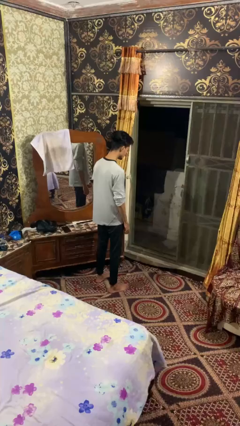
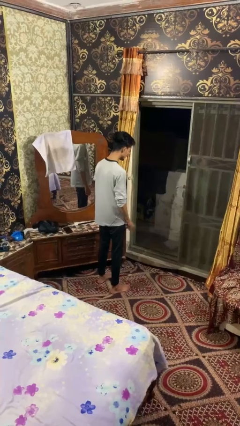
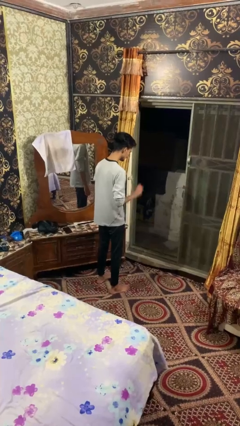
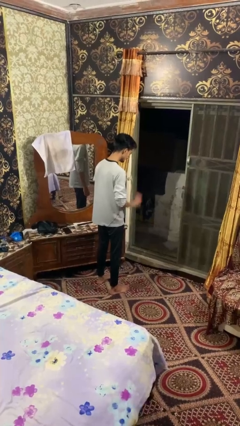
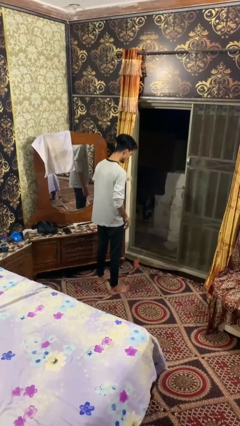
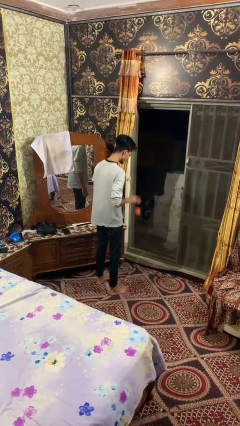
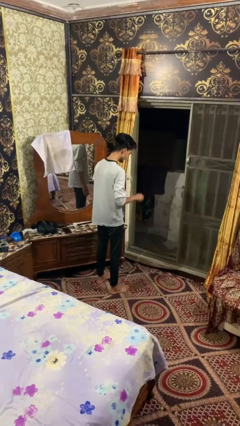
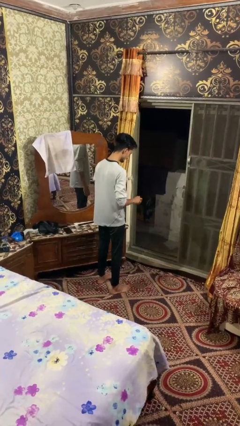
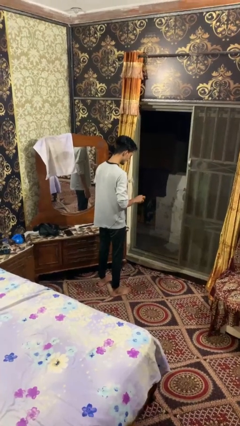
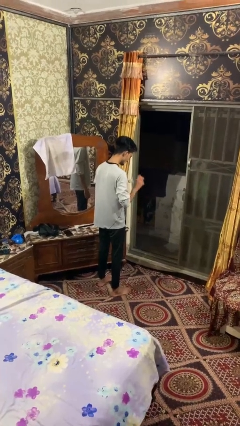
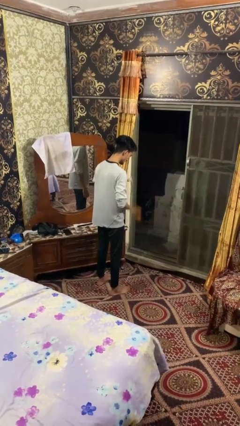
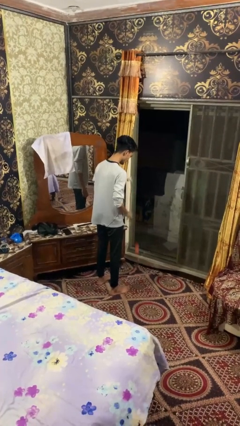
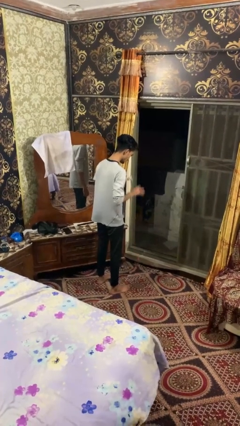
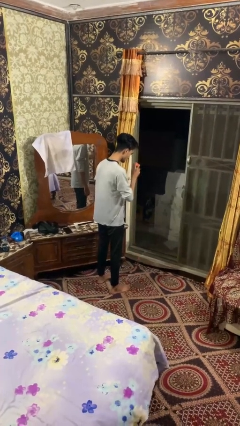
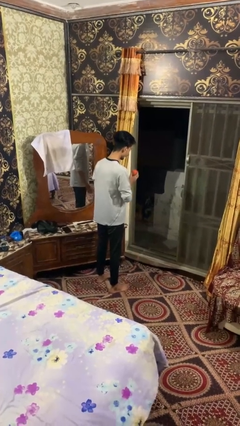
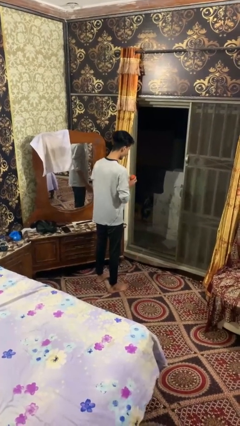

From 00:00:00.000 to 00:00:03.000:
person bounces ball on floor

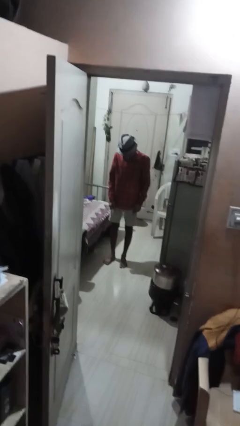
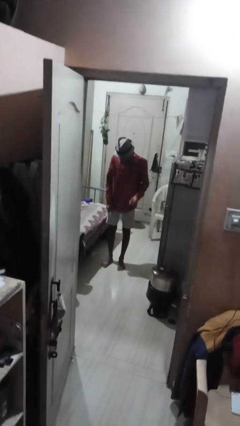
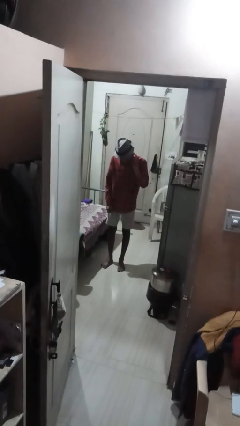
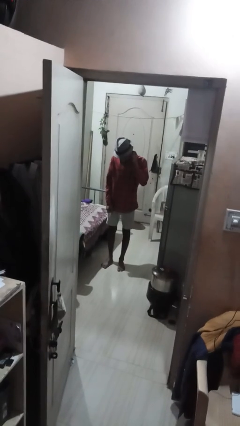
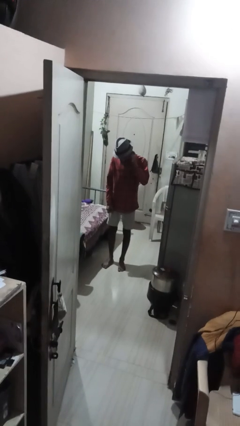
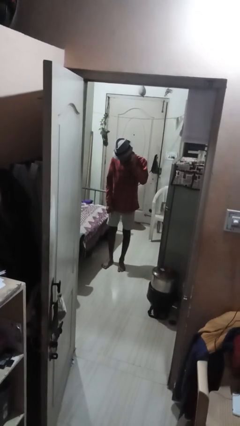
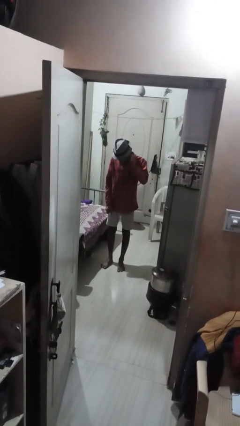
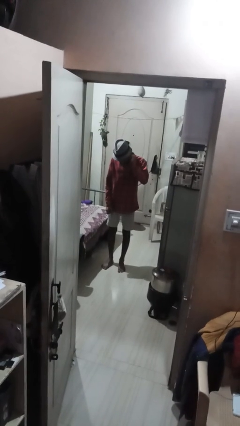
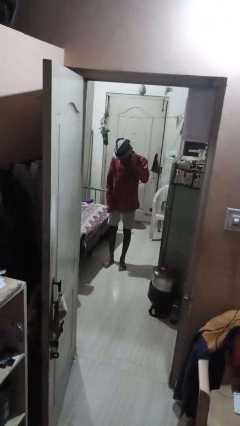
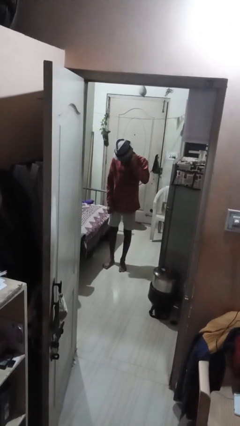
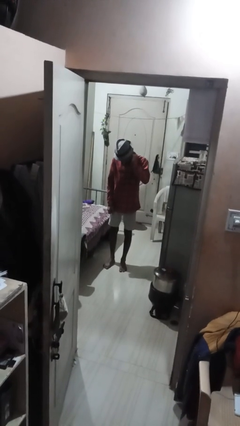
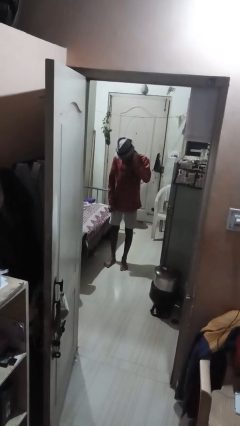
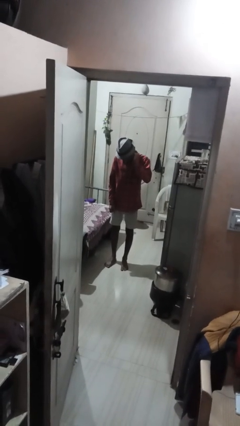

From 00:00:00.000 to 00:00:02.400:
person touches earlobe

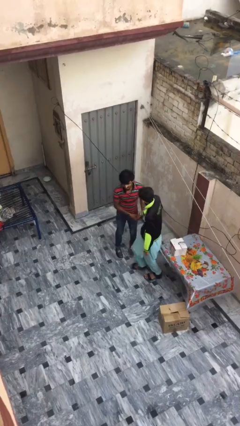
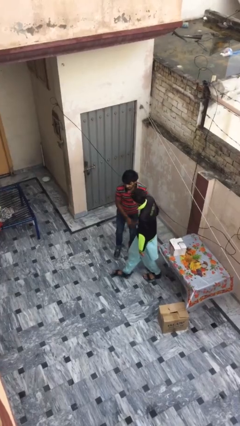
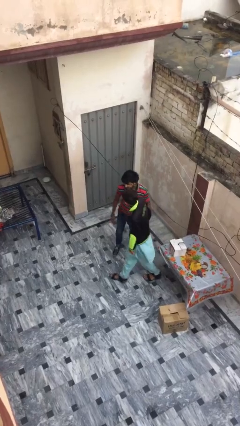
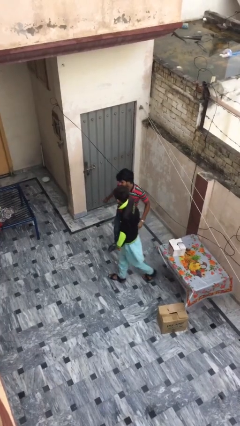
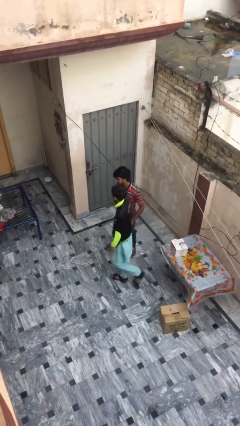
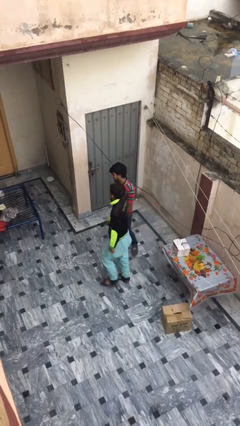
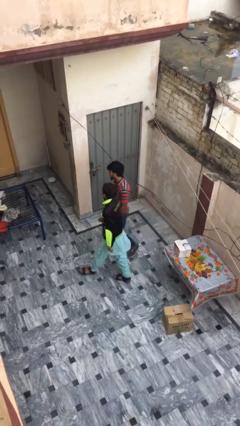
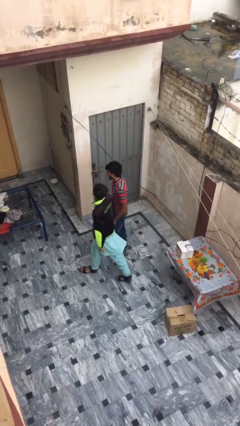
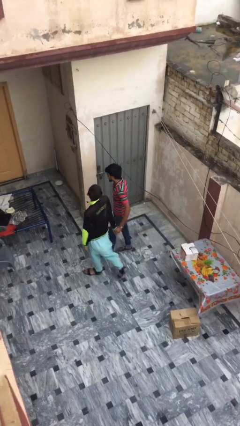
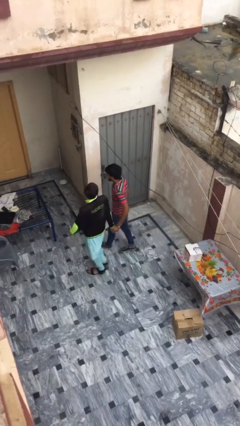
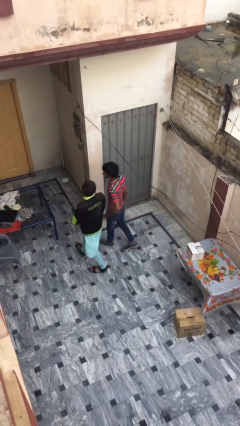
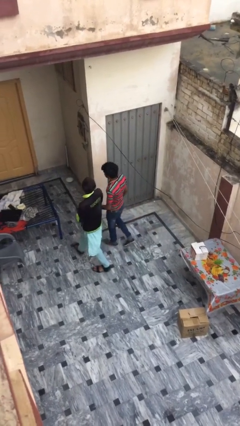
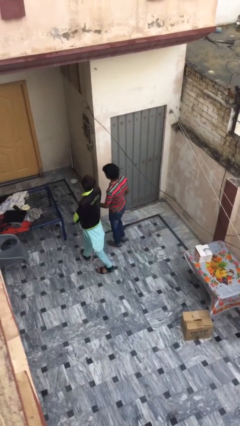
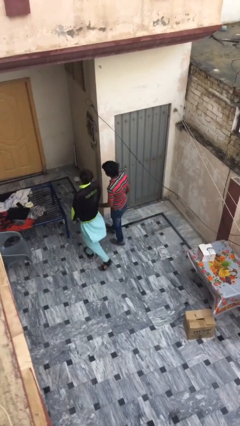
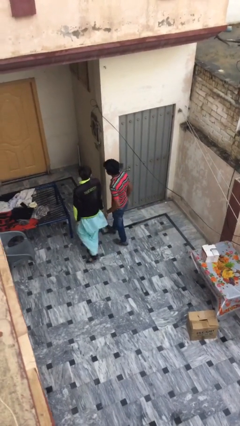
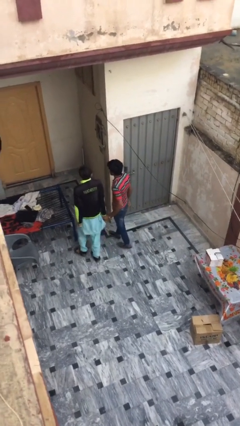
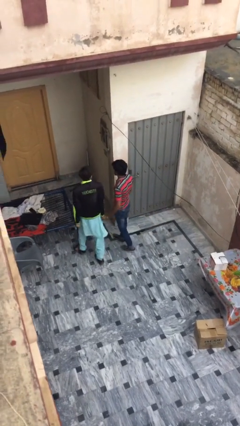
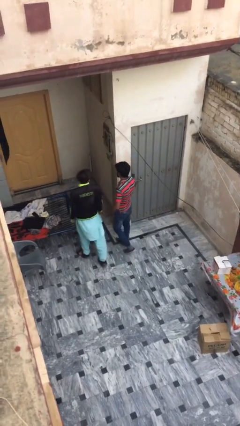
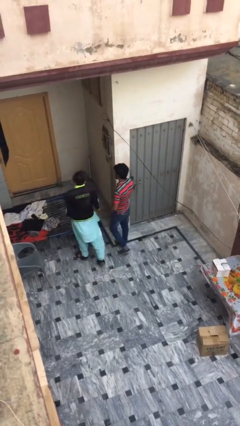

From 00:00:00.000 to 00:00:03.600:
person talks to person

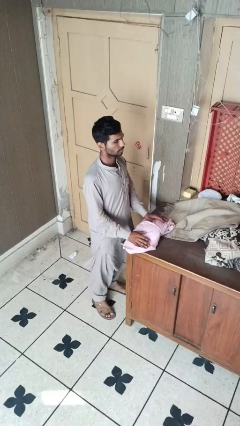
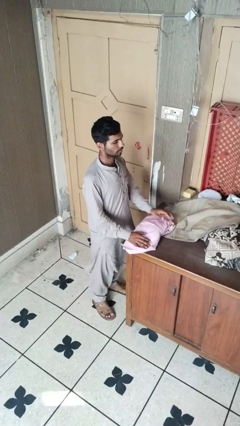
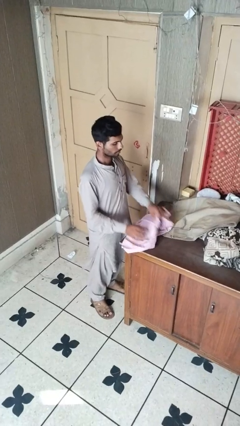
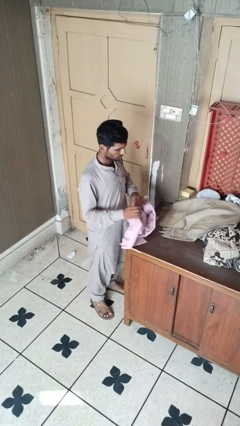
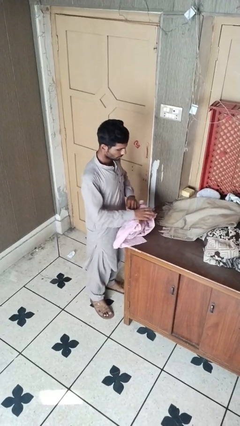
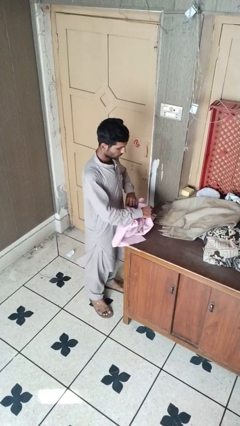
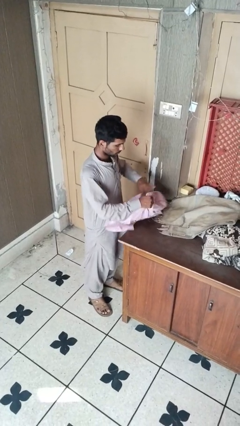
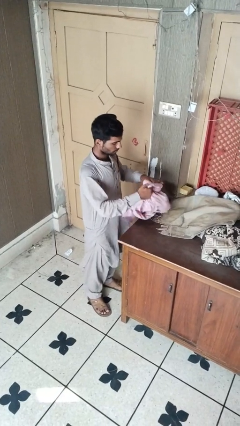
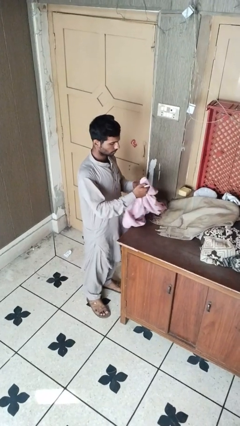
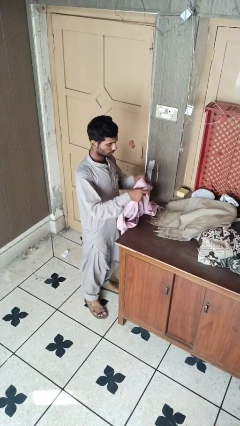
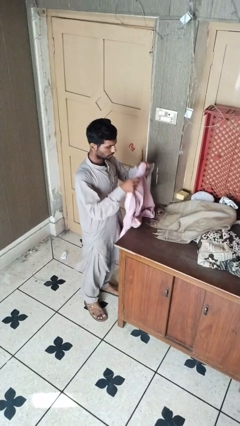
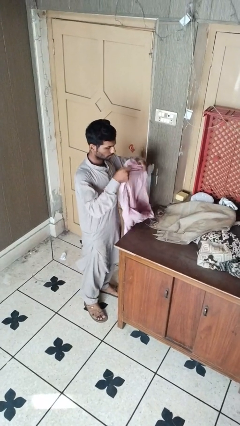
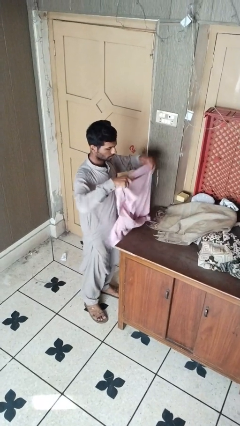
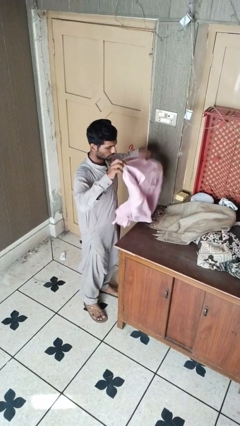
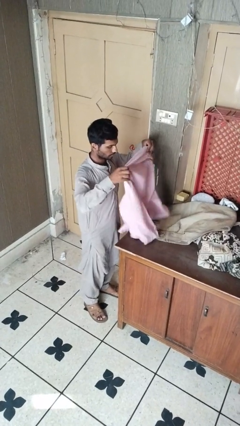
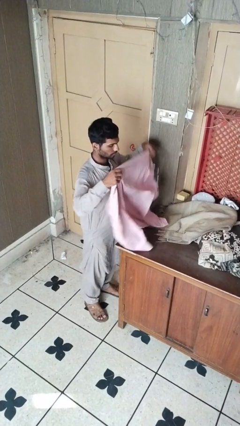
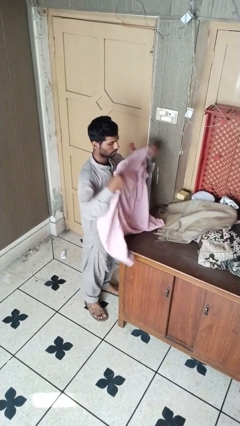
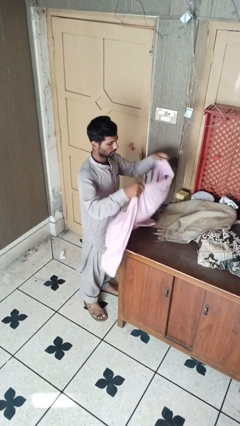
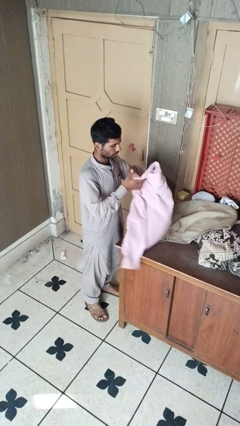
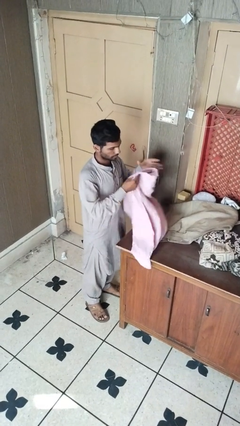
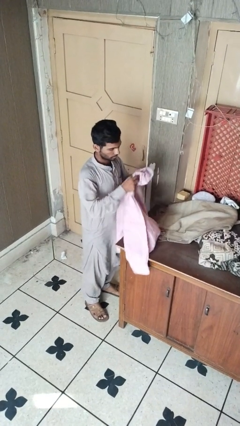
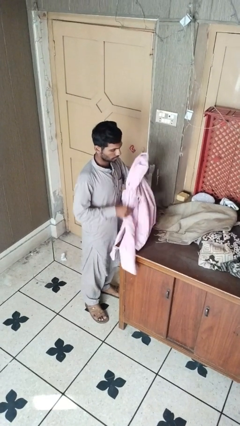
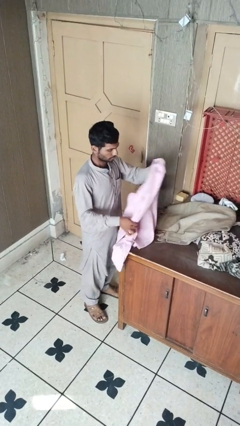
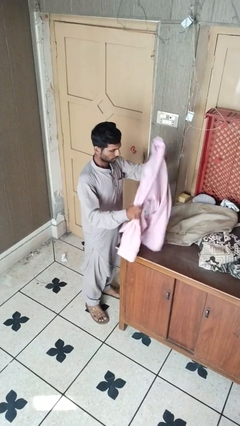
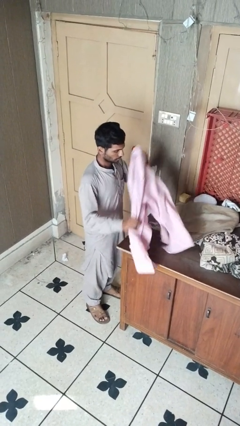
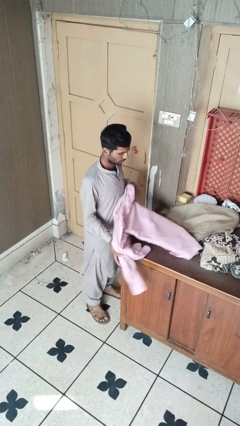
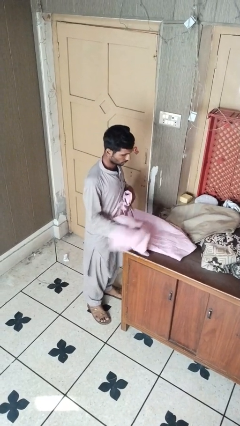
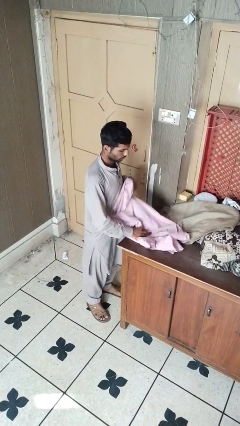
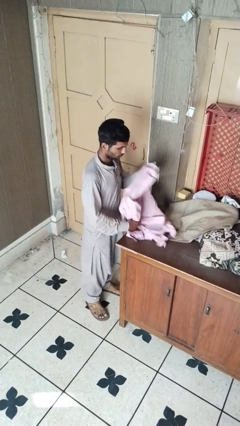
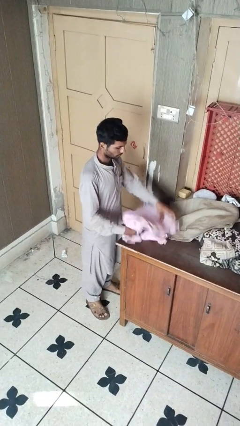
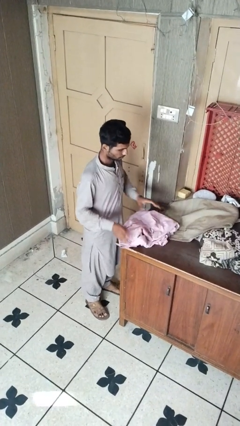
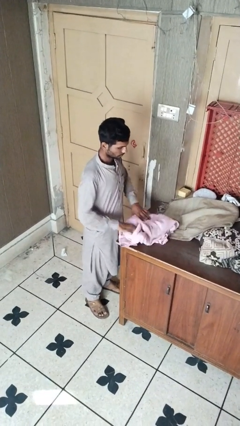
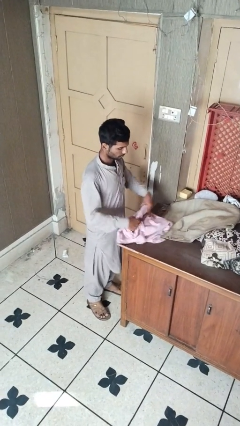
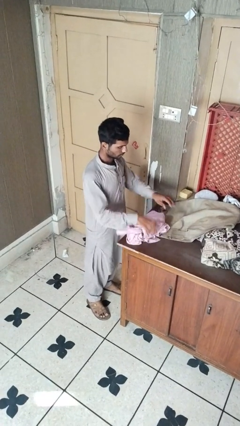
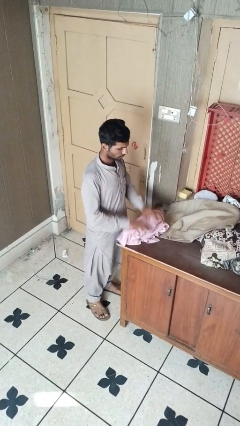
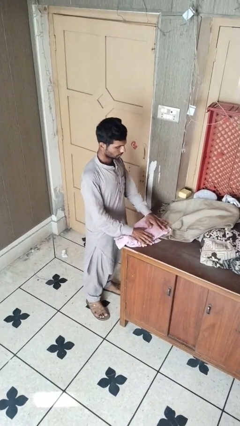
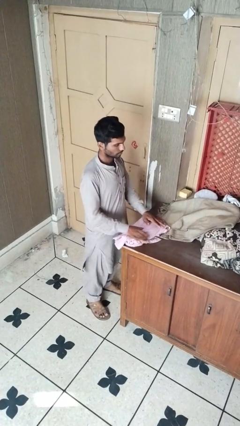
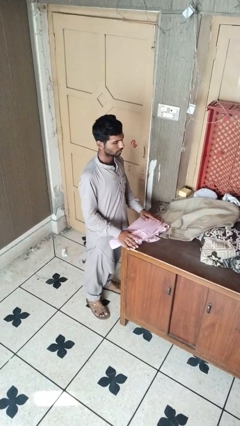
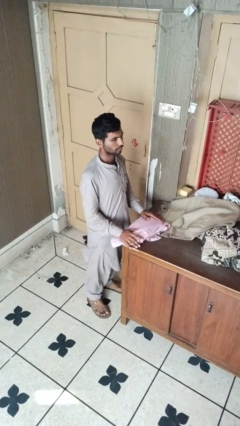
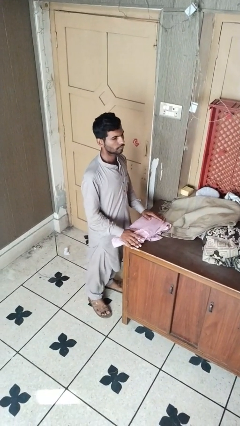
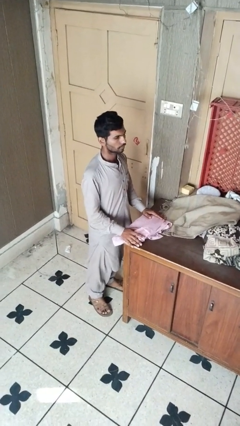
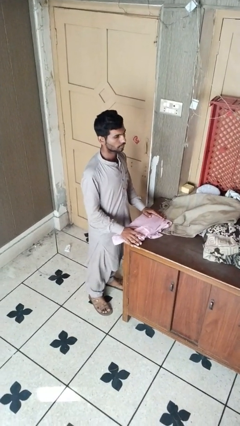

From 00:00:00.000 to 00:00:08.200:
person folds shirt

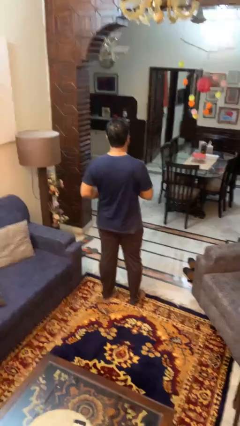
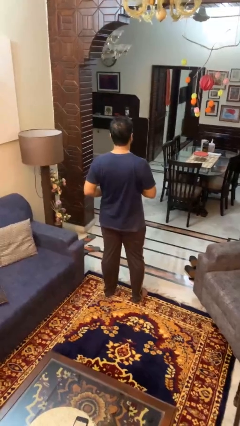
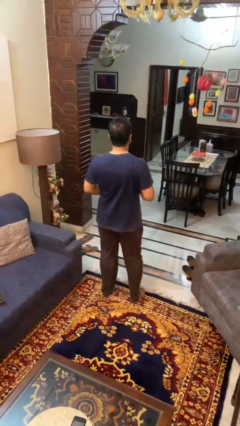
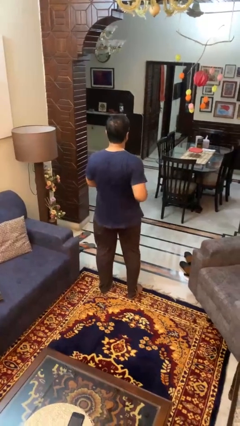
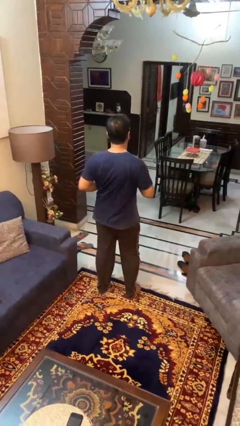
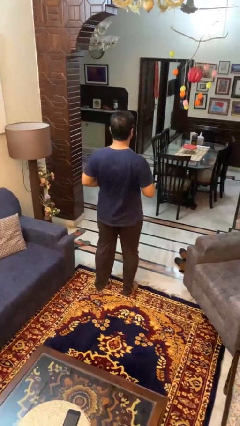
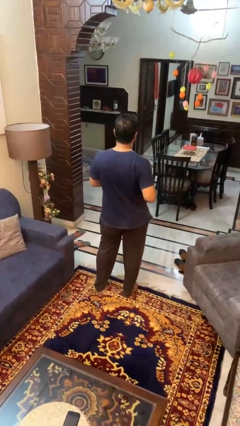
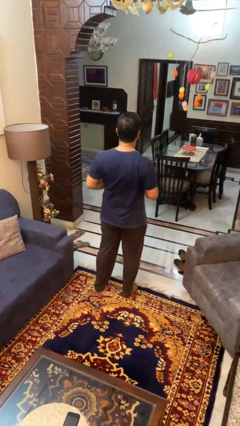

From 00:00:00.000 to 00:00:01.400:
person wiggles hips
